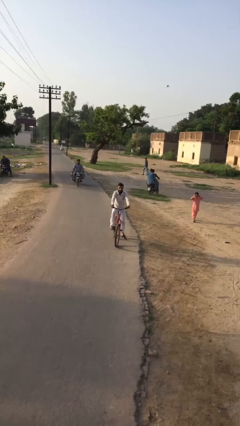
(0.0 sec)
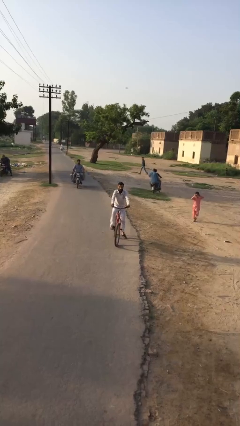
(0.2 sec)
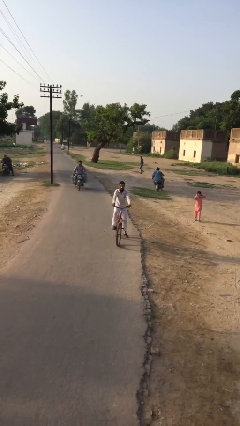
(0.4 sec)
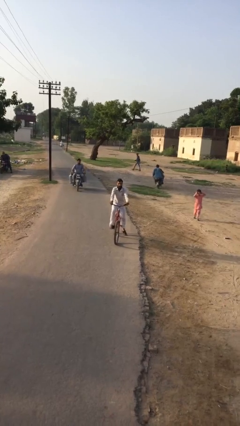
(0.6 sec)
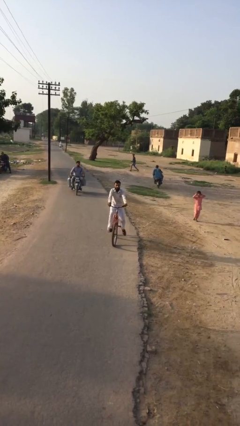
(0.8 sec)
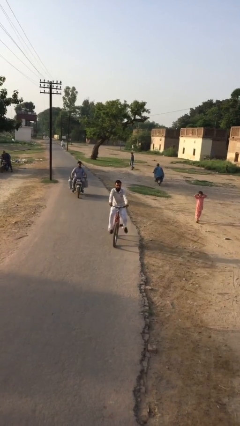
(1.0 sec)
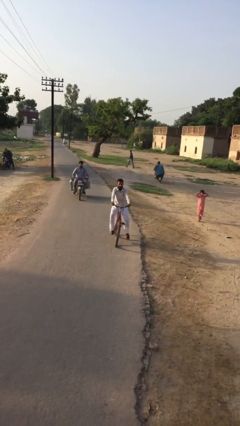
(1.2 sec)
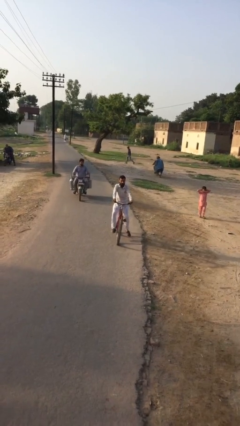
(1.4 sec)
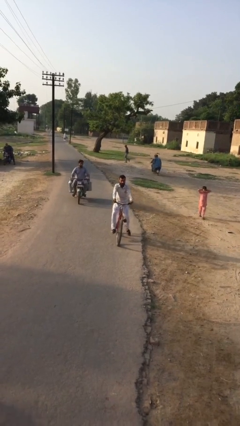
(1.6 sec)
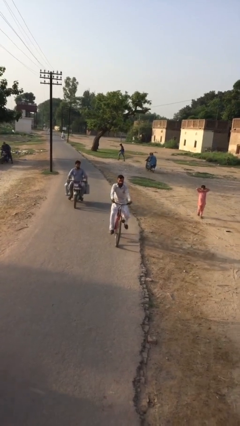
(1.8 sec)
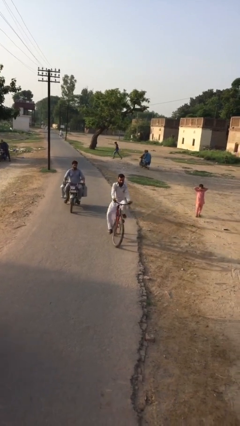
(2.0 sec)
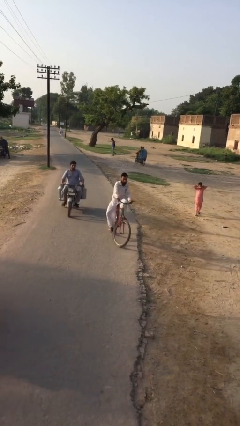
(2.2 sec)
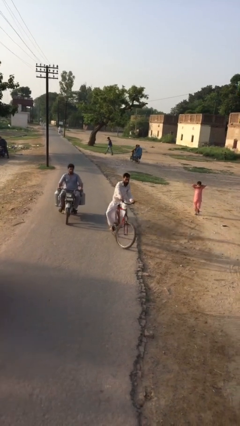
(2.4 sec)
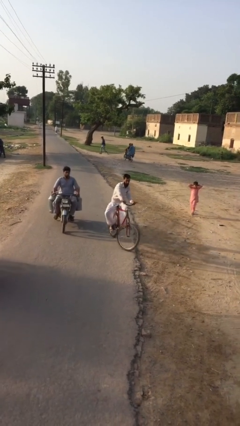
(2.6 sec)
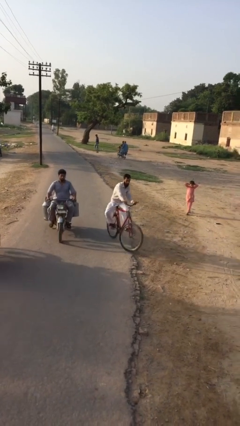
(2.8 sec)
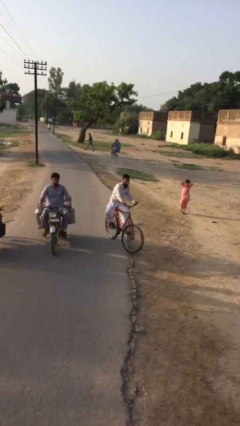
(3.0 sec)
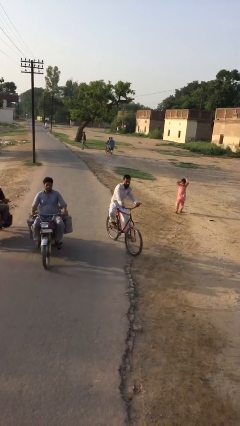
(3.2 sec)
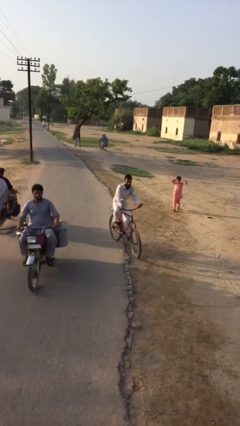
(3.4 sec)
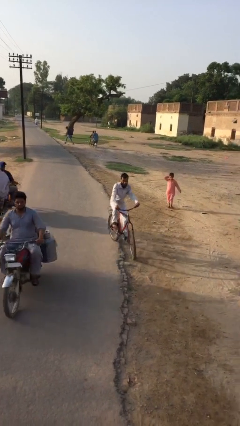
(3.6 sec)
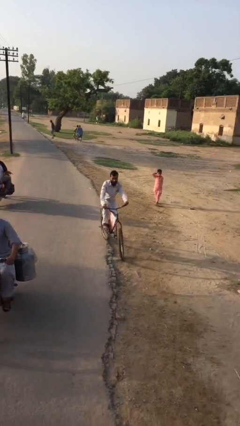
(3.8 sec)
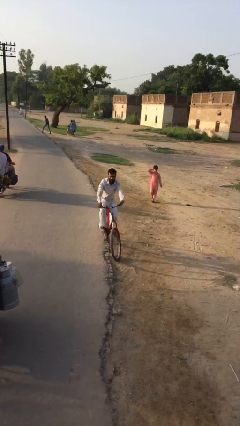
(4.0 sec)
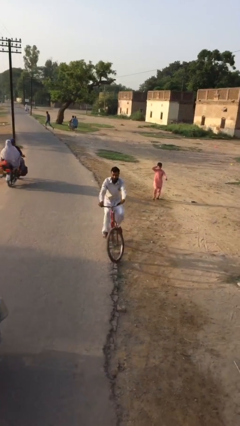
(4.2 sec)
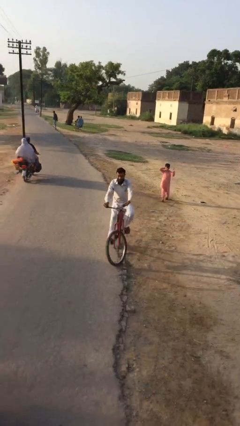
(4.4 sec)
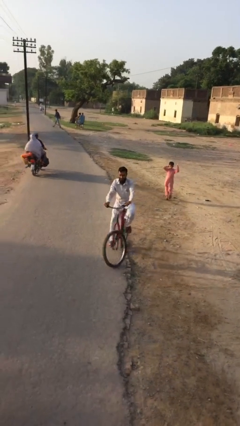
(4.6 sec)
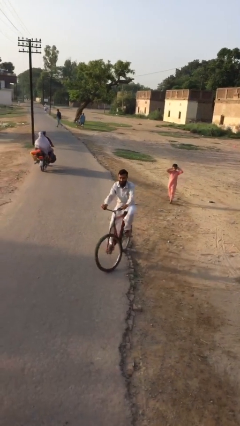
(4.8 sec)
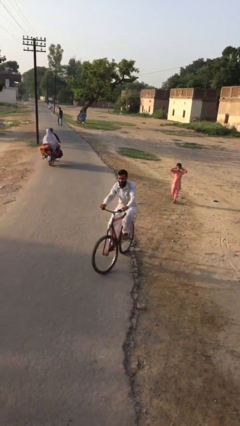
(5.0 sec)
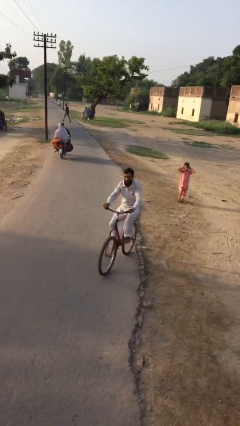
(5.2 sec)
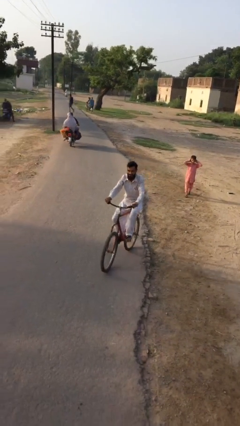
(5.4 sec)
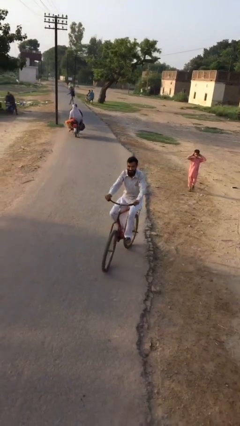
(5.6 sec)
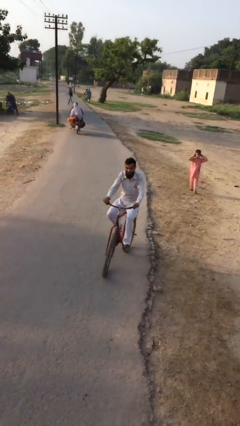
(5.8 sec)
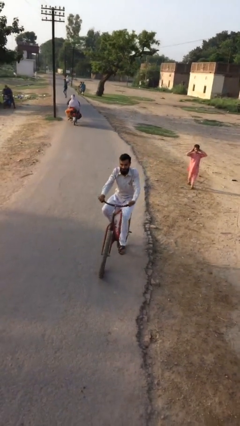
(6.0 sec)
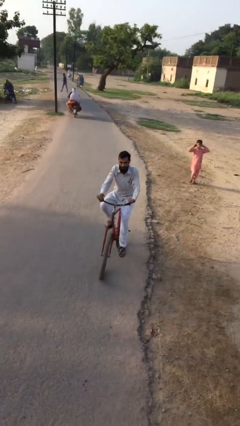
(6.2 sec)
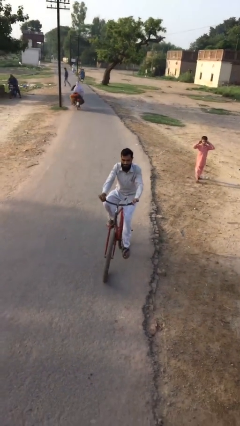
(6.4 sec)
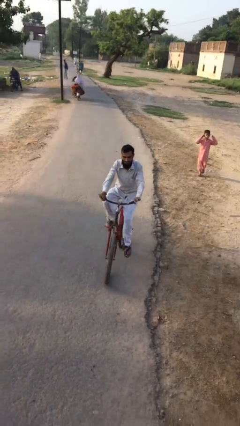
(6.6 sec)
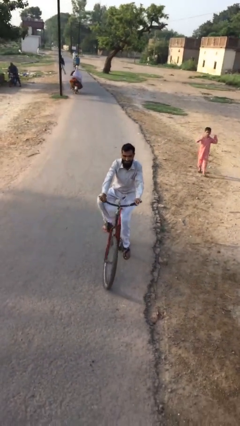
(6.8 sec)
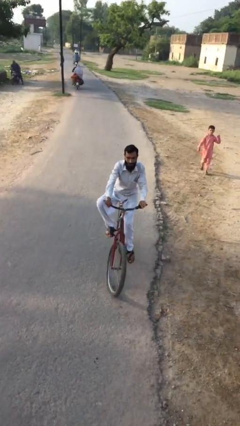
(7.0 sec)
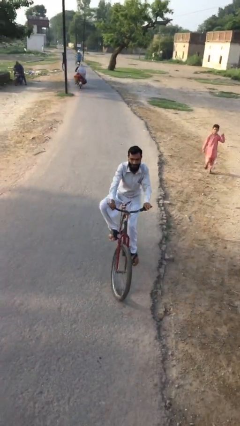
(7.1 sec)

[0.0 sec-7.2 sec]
person rides bicycle

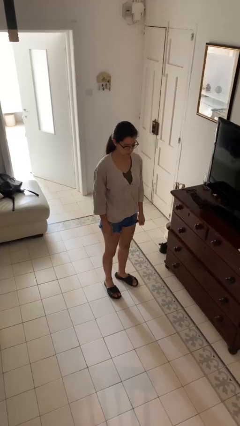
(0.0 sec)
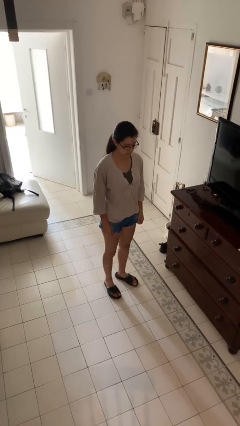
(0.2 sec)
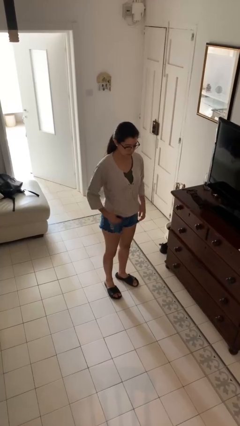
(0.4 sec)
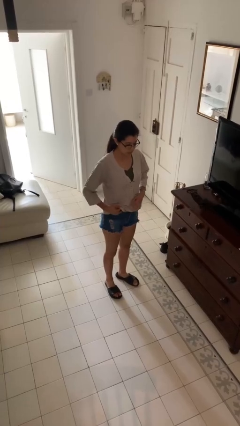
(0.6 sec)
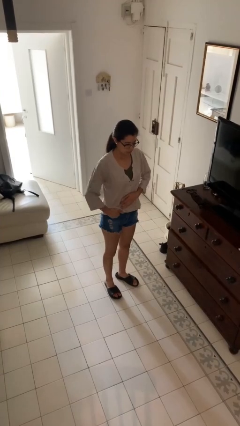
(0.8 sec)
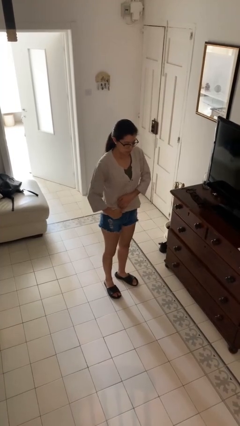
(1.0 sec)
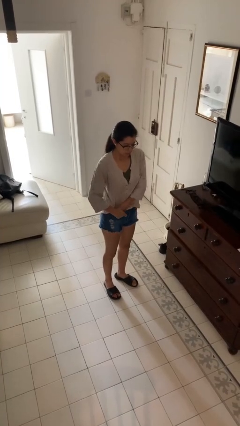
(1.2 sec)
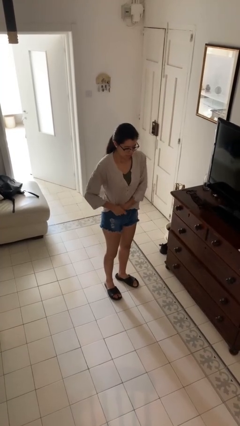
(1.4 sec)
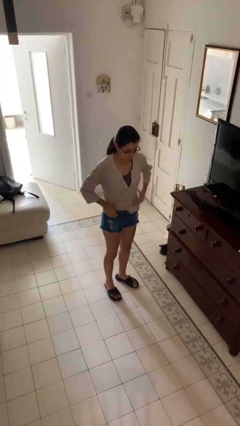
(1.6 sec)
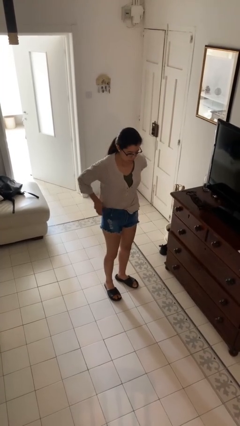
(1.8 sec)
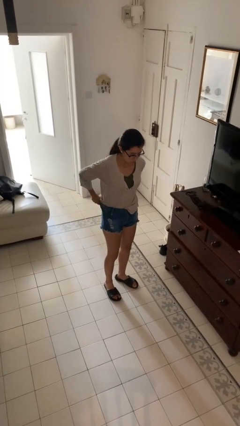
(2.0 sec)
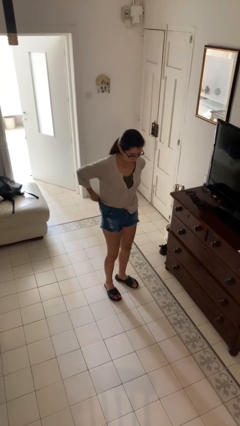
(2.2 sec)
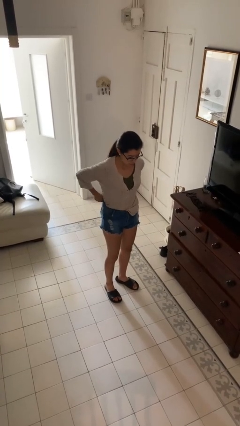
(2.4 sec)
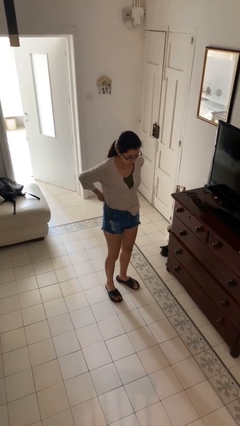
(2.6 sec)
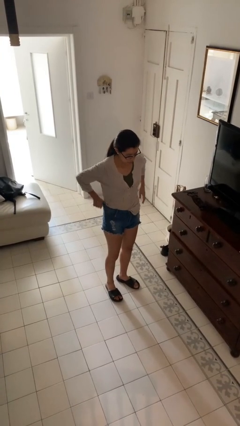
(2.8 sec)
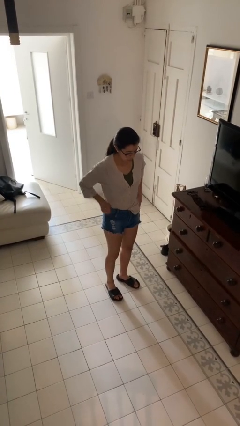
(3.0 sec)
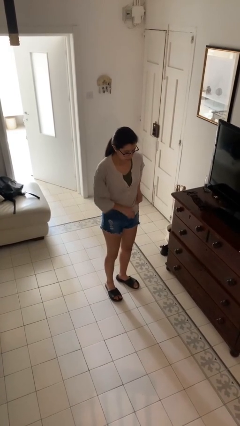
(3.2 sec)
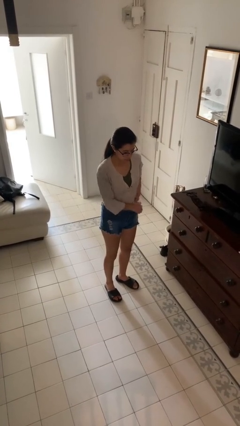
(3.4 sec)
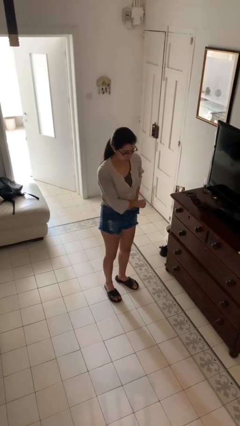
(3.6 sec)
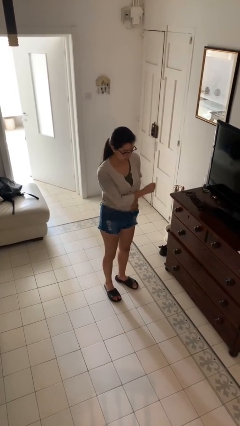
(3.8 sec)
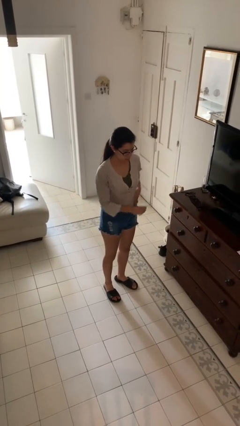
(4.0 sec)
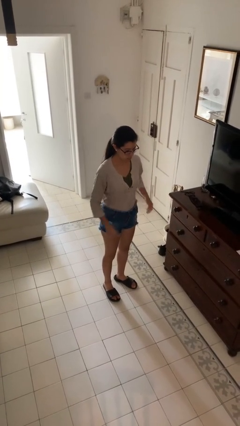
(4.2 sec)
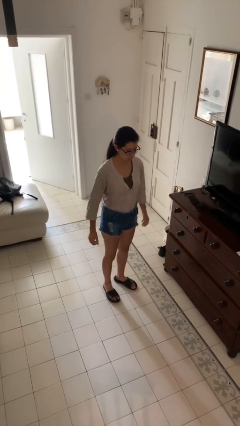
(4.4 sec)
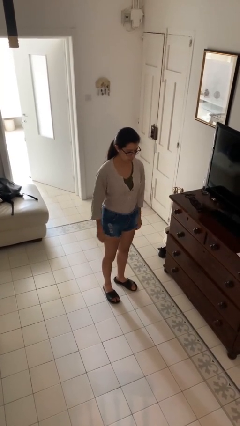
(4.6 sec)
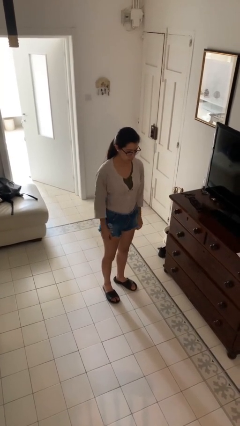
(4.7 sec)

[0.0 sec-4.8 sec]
person tucks in shirt

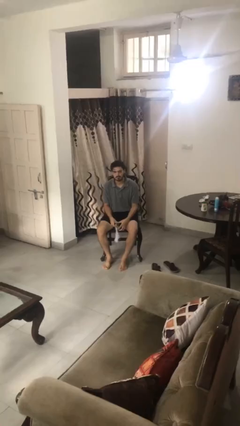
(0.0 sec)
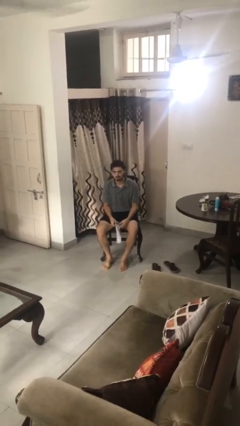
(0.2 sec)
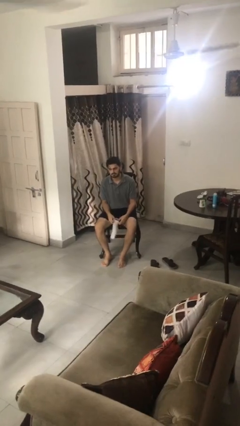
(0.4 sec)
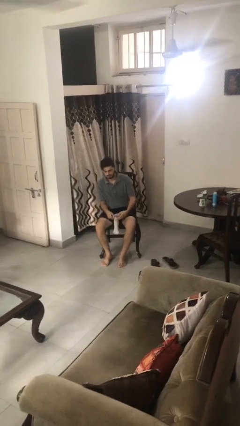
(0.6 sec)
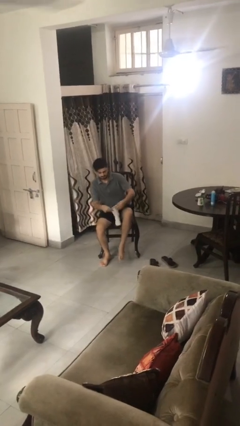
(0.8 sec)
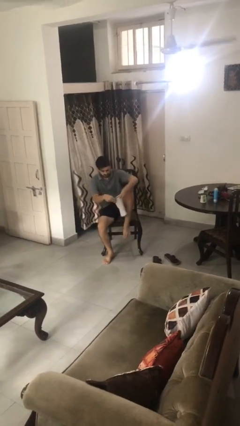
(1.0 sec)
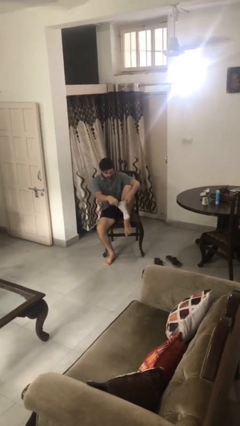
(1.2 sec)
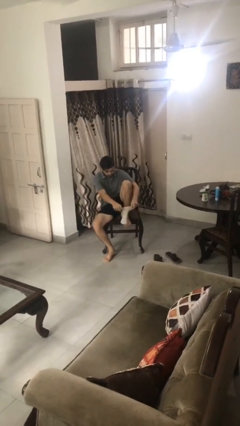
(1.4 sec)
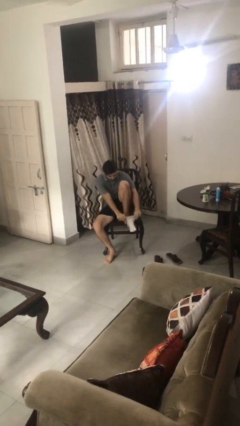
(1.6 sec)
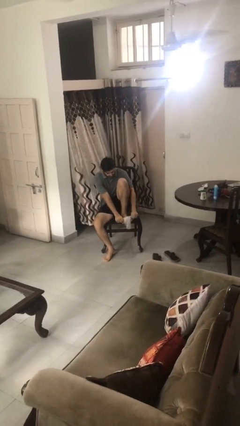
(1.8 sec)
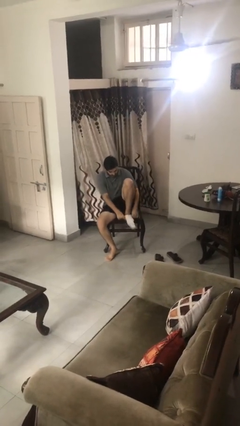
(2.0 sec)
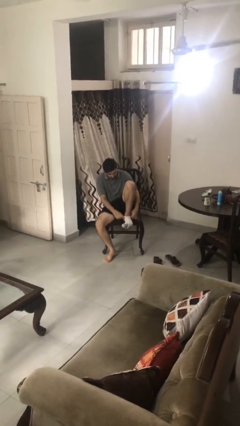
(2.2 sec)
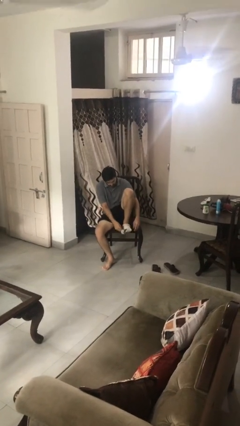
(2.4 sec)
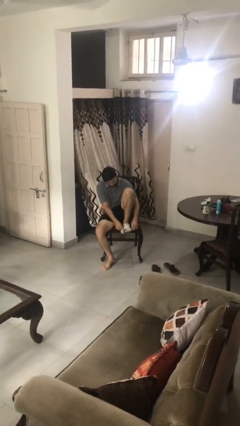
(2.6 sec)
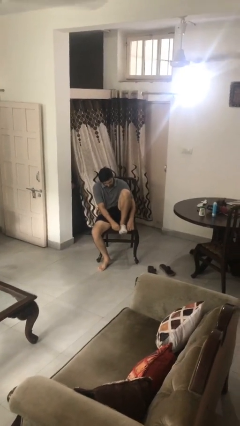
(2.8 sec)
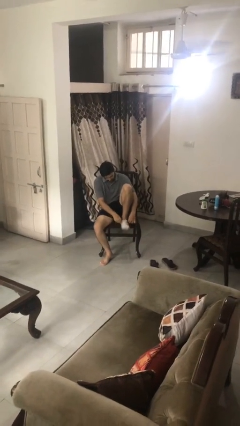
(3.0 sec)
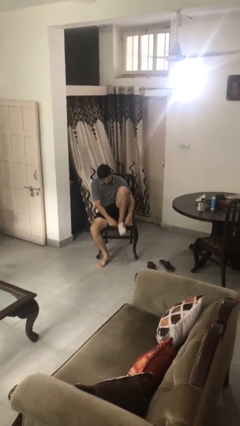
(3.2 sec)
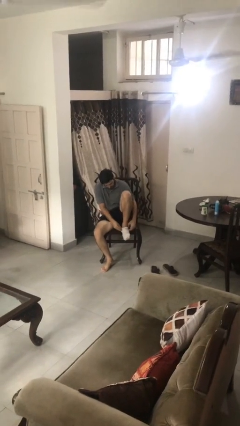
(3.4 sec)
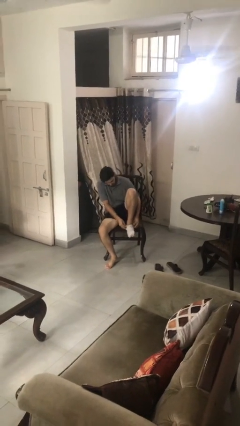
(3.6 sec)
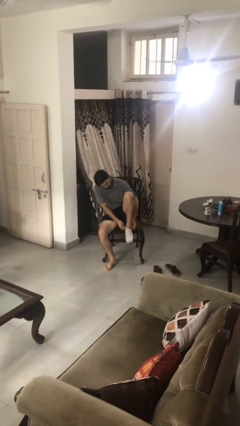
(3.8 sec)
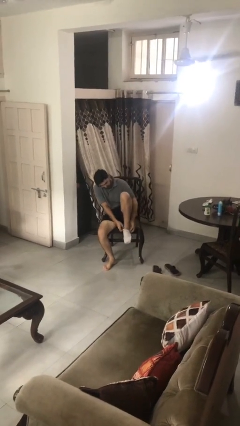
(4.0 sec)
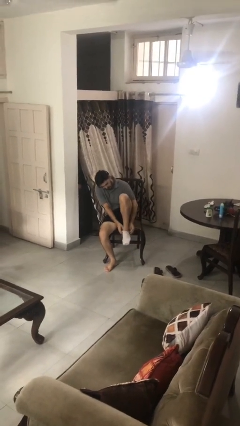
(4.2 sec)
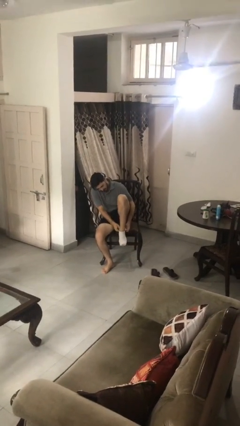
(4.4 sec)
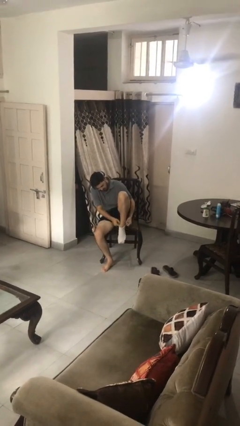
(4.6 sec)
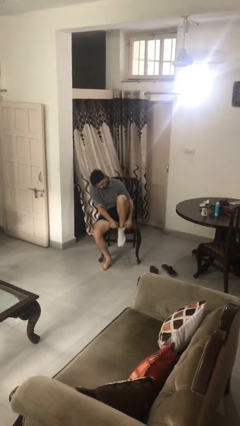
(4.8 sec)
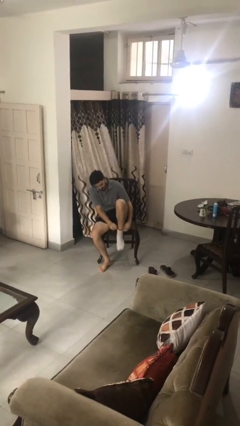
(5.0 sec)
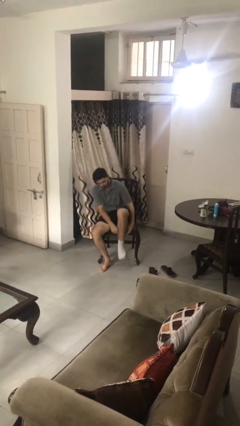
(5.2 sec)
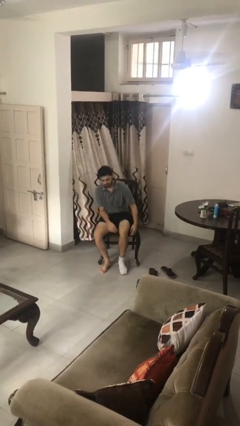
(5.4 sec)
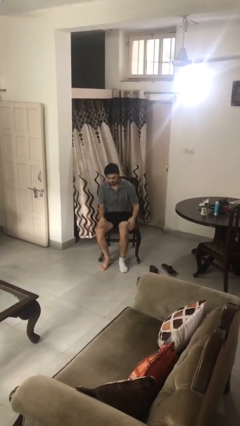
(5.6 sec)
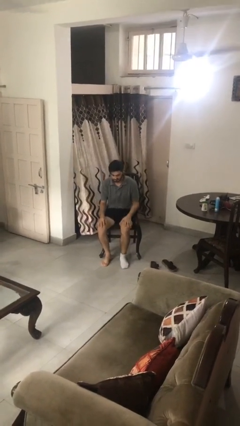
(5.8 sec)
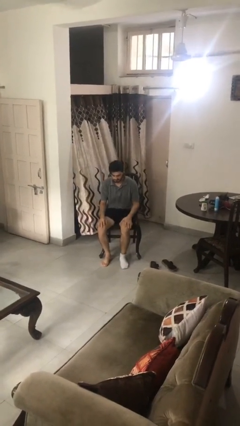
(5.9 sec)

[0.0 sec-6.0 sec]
person puts on socks
